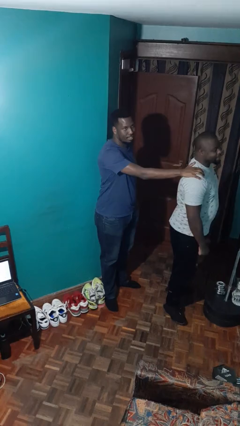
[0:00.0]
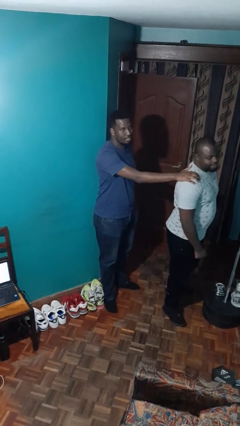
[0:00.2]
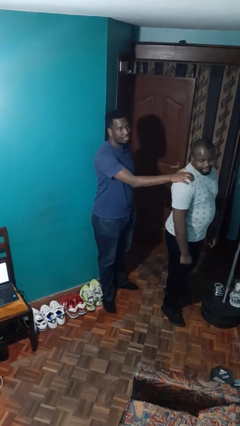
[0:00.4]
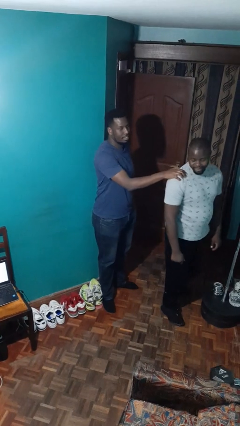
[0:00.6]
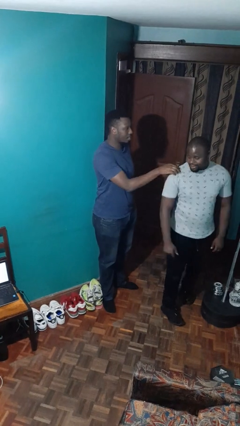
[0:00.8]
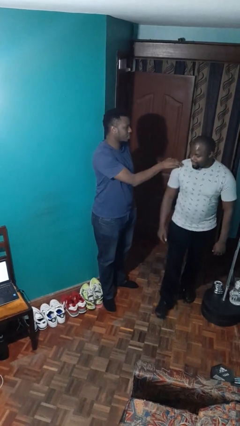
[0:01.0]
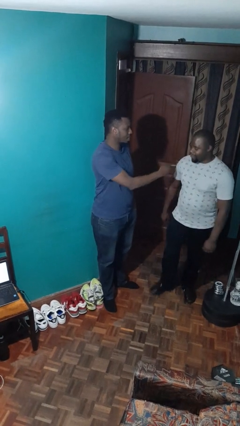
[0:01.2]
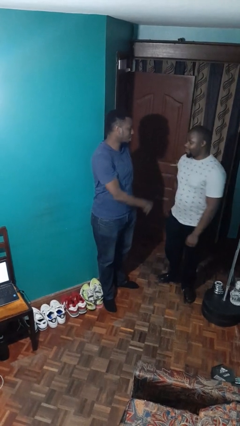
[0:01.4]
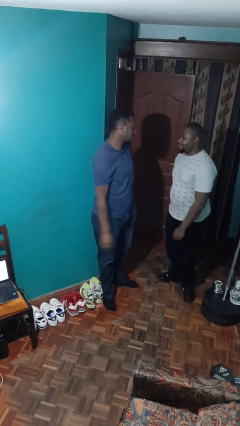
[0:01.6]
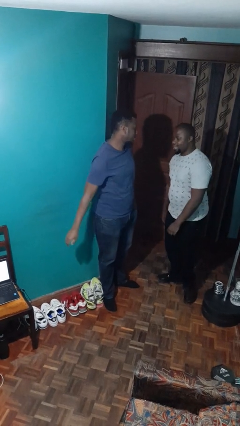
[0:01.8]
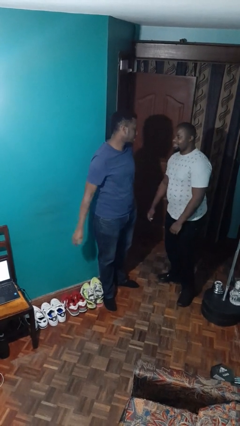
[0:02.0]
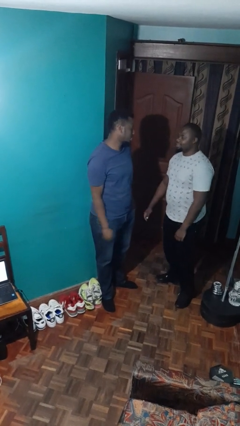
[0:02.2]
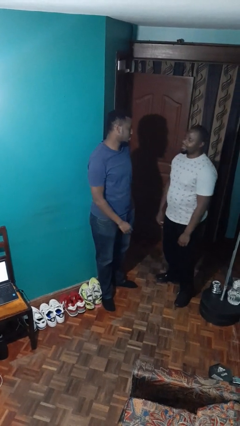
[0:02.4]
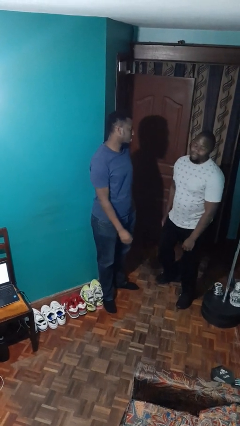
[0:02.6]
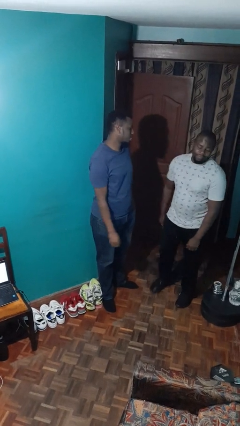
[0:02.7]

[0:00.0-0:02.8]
person spins person around

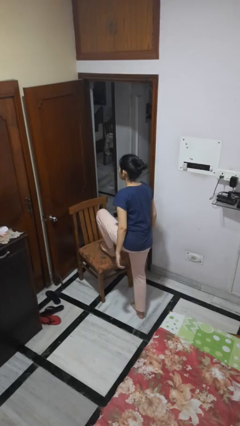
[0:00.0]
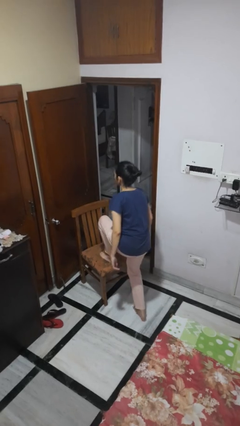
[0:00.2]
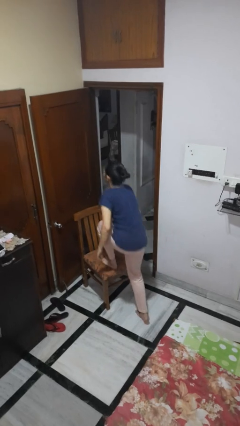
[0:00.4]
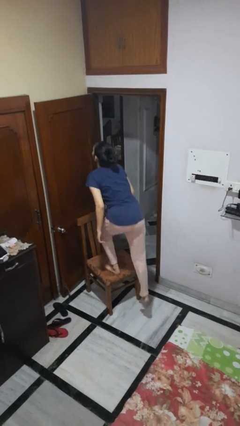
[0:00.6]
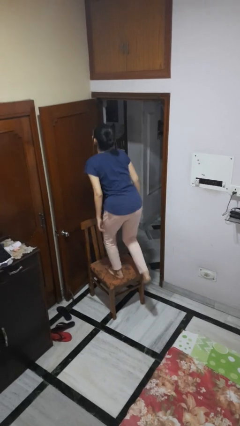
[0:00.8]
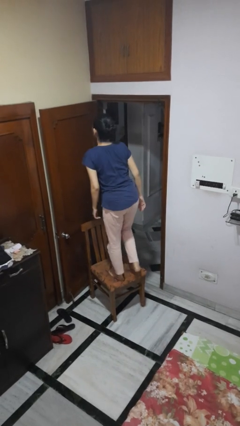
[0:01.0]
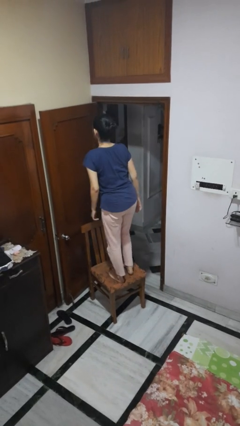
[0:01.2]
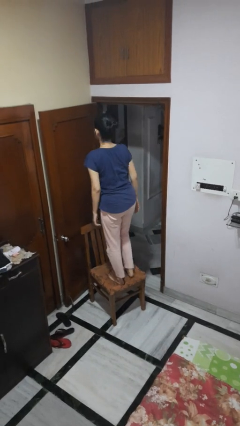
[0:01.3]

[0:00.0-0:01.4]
person climbs on chair

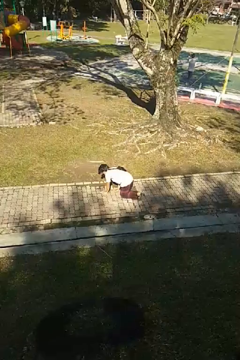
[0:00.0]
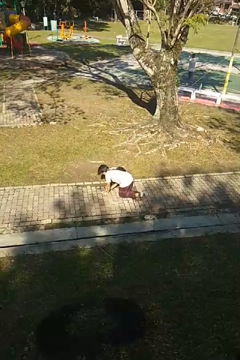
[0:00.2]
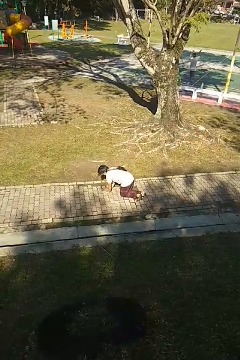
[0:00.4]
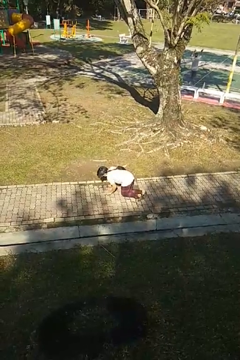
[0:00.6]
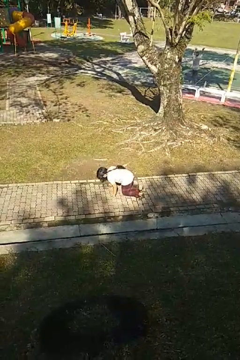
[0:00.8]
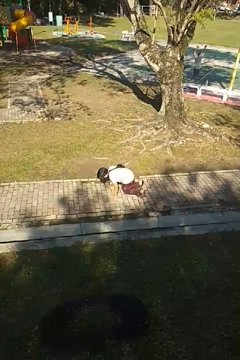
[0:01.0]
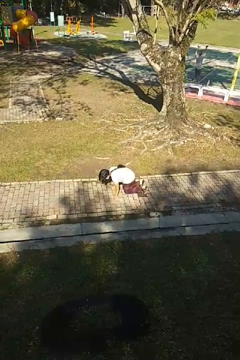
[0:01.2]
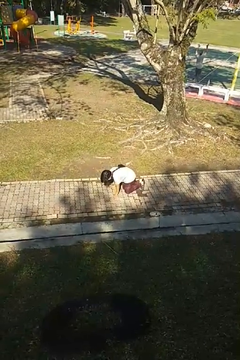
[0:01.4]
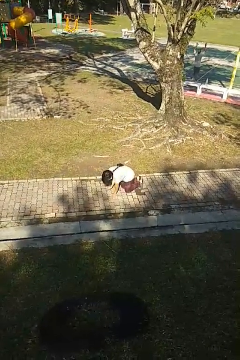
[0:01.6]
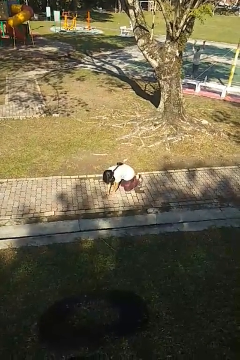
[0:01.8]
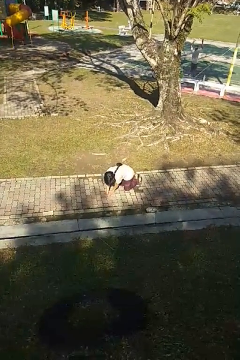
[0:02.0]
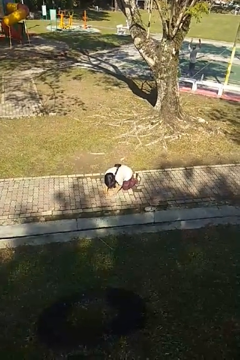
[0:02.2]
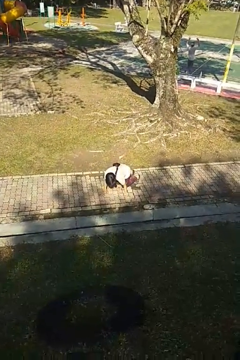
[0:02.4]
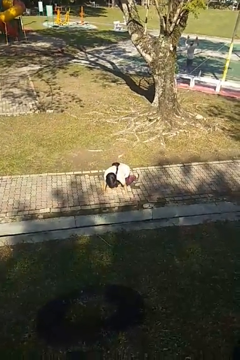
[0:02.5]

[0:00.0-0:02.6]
person crawls

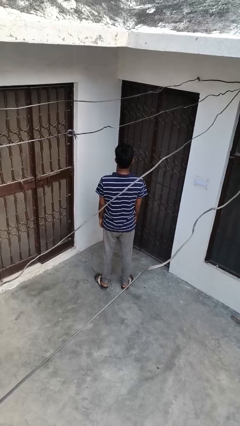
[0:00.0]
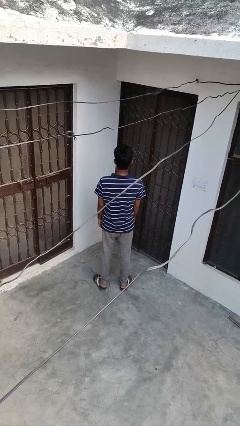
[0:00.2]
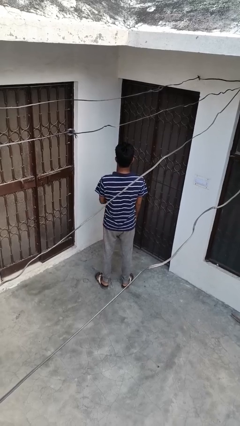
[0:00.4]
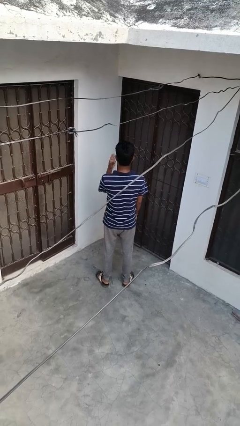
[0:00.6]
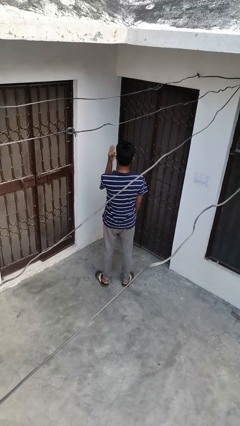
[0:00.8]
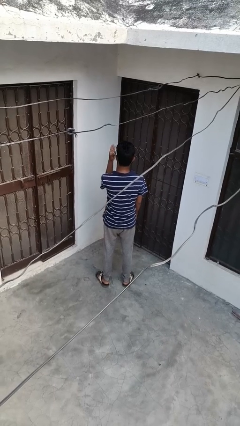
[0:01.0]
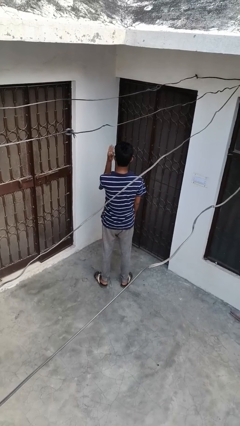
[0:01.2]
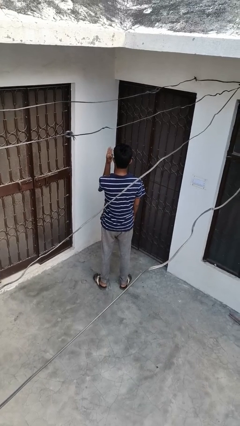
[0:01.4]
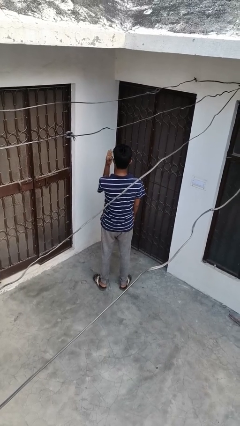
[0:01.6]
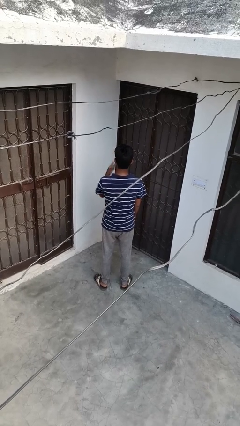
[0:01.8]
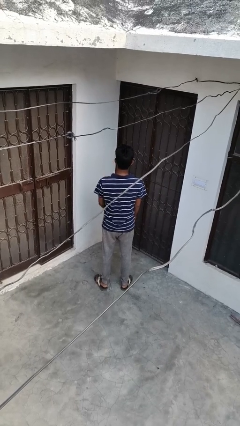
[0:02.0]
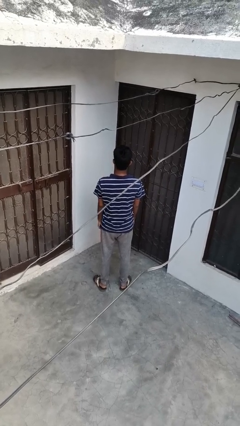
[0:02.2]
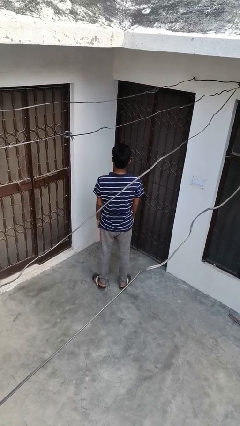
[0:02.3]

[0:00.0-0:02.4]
person gestures number four

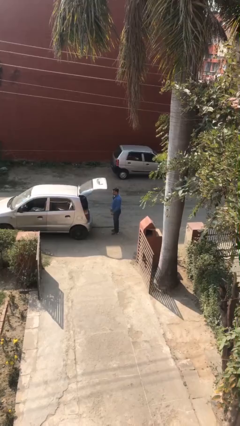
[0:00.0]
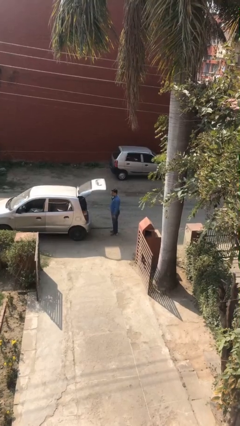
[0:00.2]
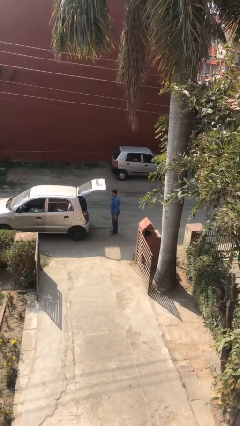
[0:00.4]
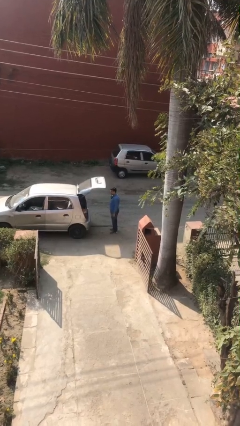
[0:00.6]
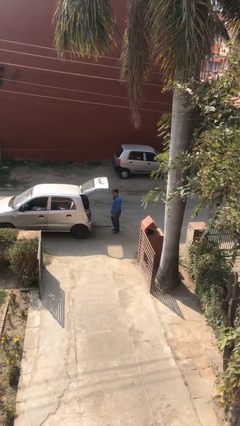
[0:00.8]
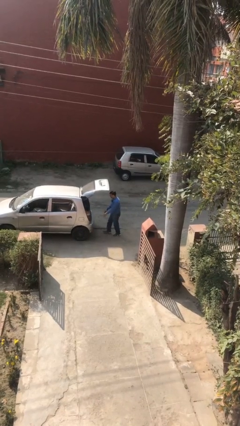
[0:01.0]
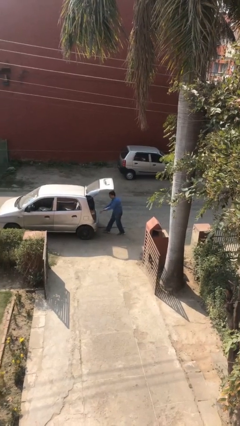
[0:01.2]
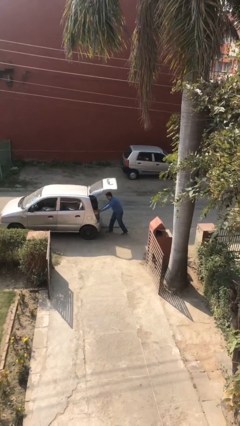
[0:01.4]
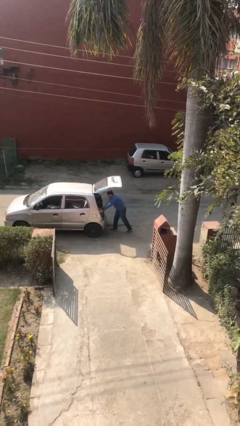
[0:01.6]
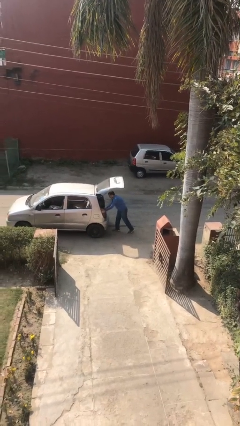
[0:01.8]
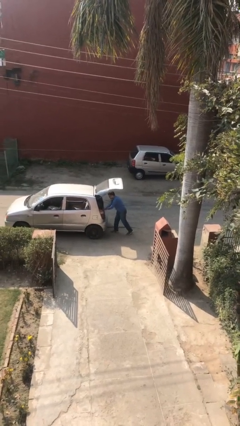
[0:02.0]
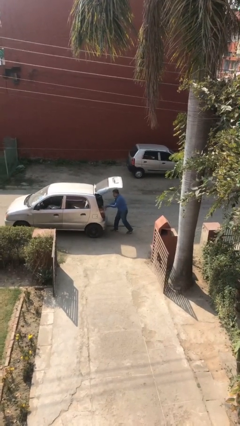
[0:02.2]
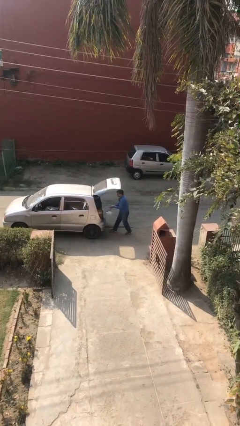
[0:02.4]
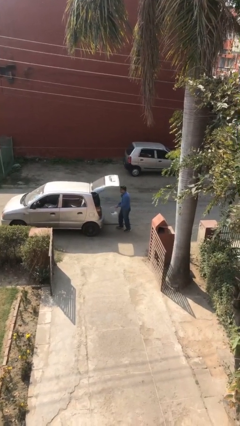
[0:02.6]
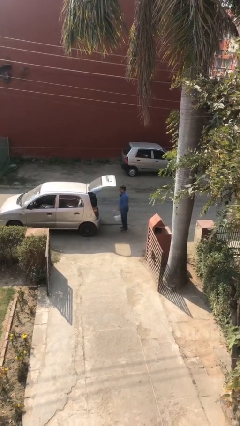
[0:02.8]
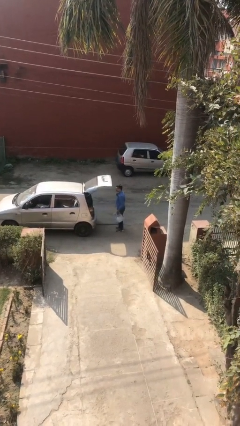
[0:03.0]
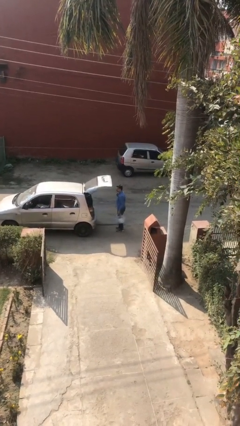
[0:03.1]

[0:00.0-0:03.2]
person unloads car

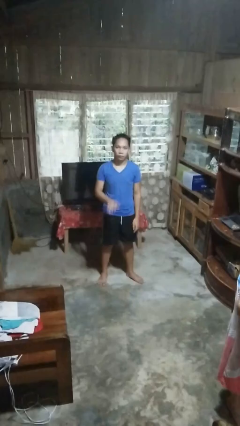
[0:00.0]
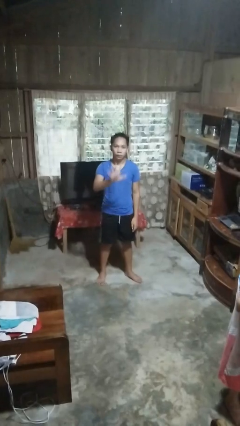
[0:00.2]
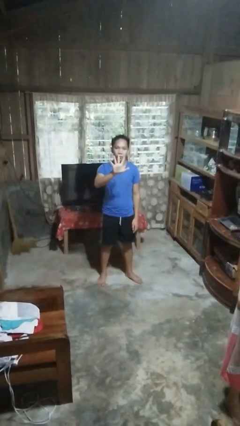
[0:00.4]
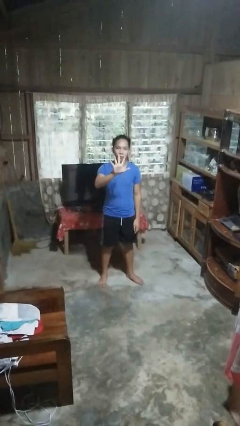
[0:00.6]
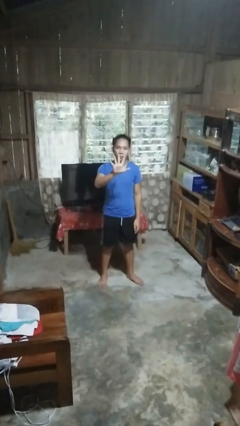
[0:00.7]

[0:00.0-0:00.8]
person gestures number five

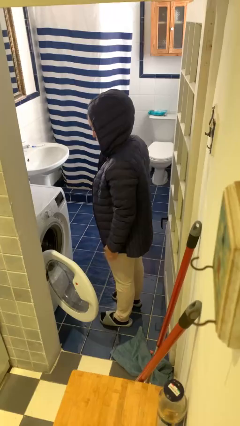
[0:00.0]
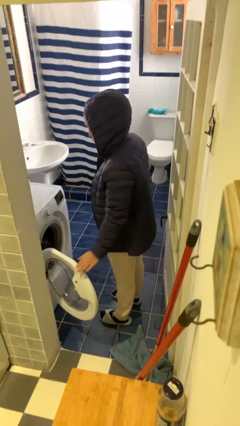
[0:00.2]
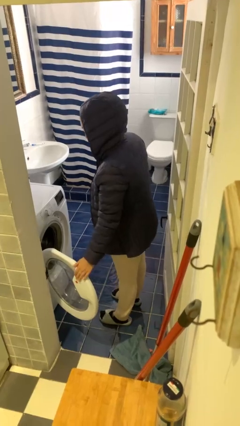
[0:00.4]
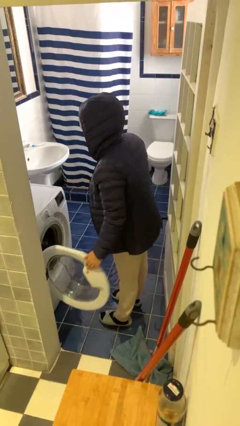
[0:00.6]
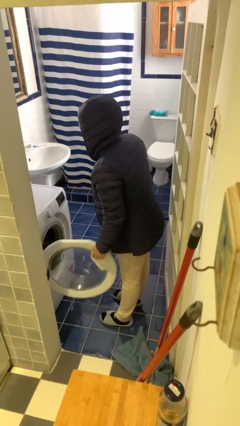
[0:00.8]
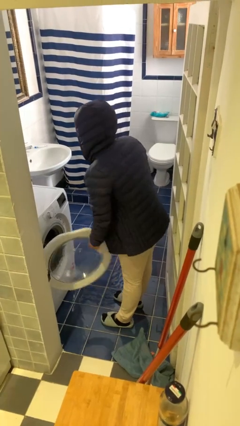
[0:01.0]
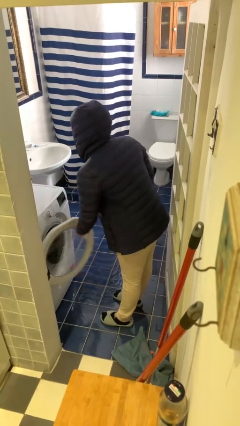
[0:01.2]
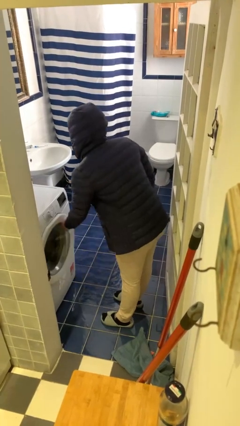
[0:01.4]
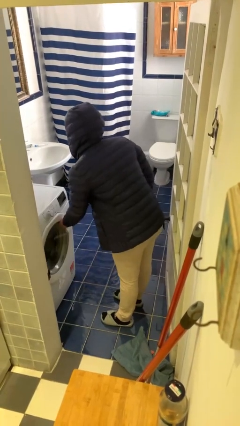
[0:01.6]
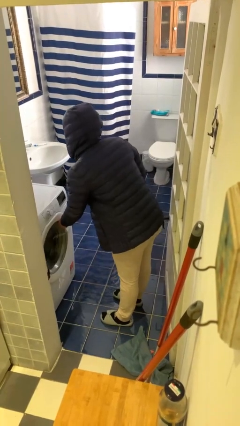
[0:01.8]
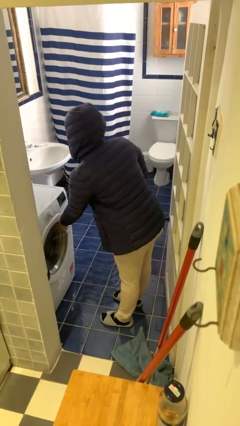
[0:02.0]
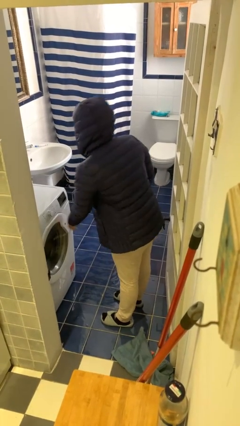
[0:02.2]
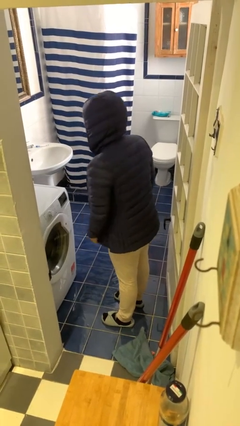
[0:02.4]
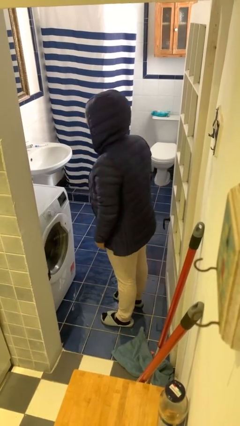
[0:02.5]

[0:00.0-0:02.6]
person closes clothes washer

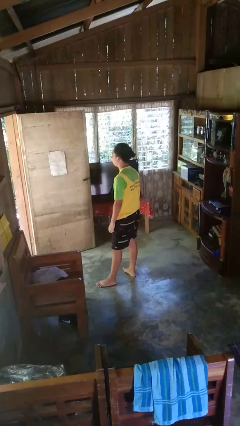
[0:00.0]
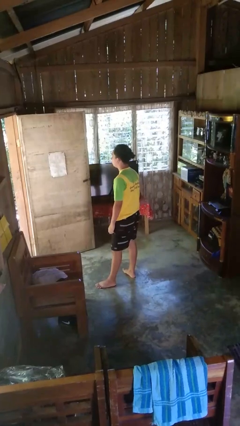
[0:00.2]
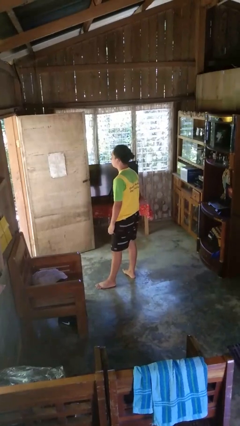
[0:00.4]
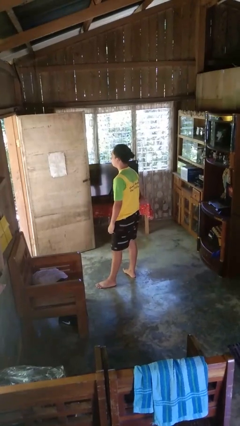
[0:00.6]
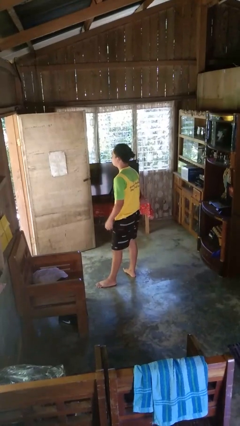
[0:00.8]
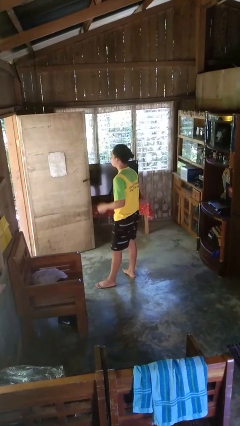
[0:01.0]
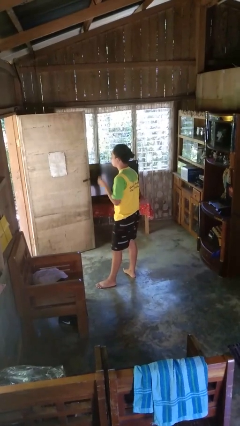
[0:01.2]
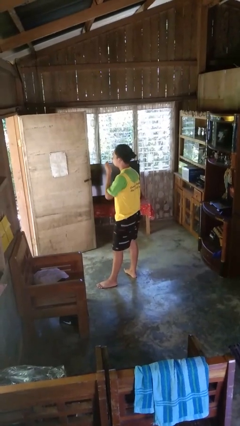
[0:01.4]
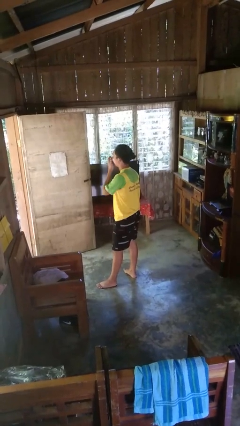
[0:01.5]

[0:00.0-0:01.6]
person yawns
